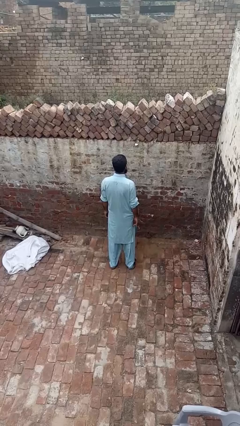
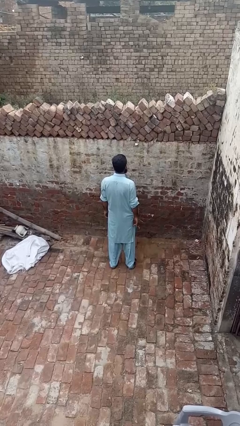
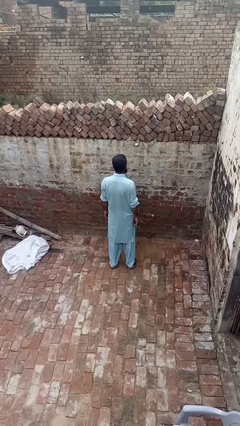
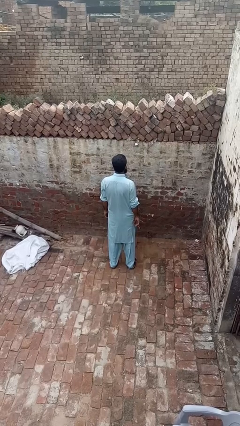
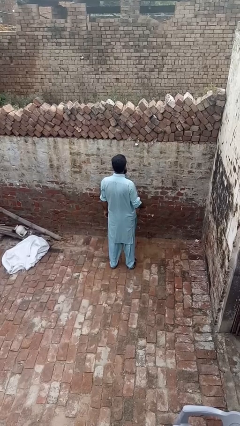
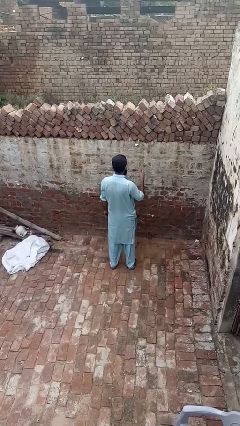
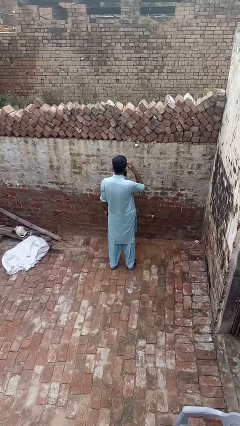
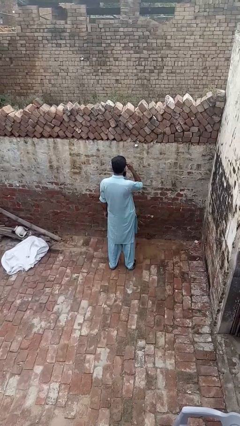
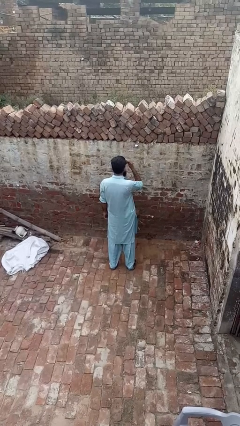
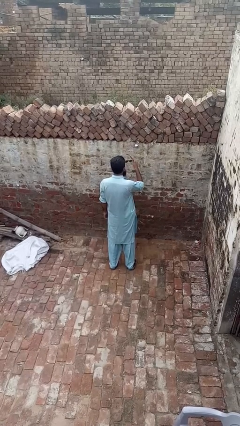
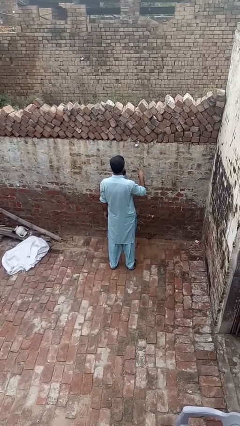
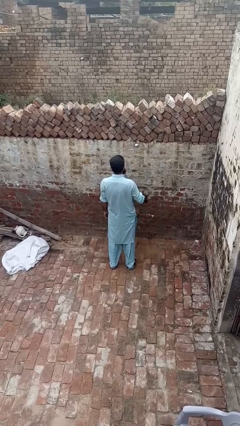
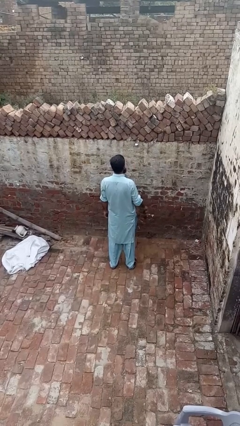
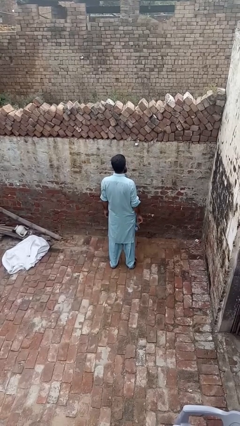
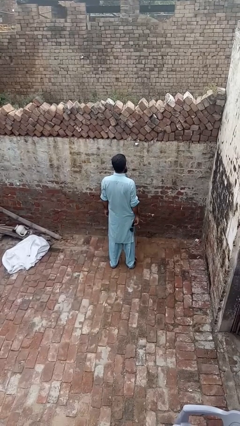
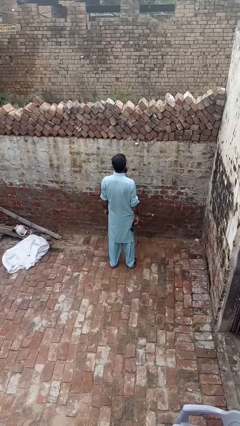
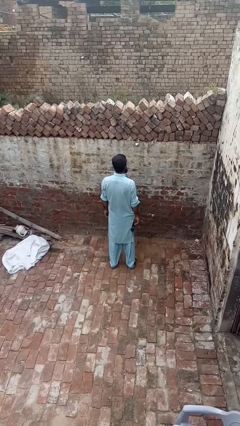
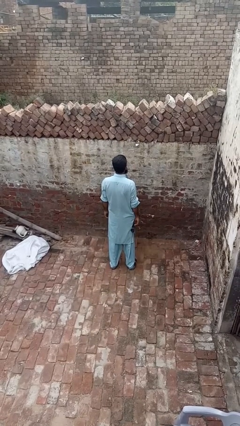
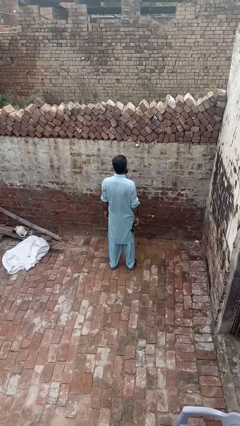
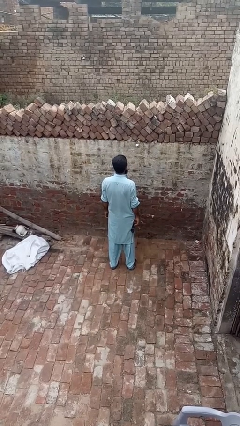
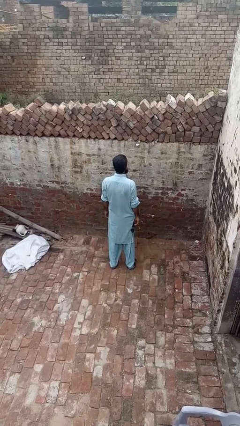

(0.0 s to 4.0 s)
person takes off sunglasses

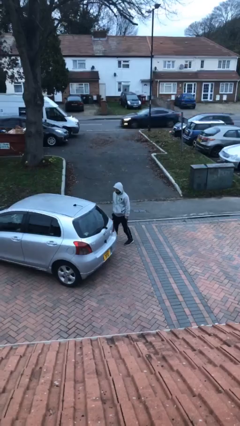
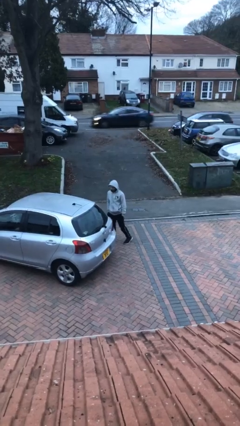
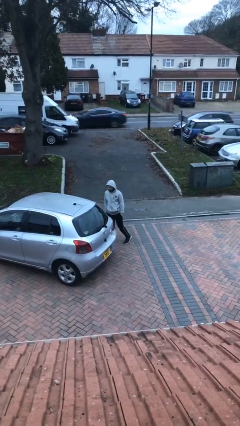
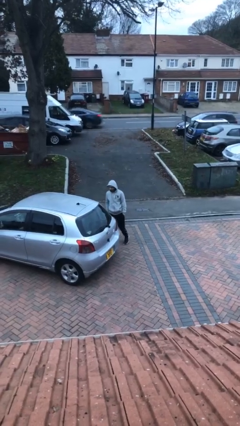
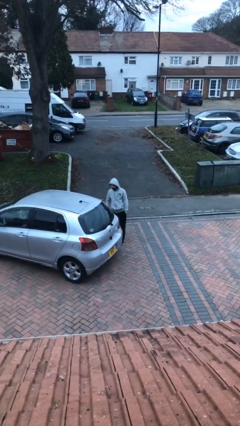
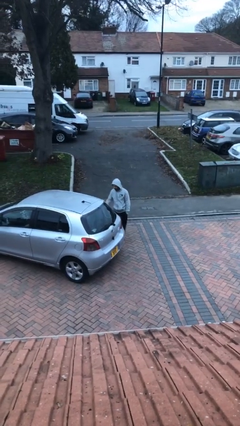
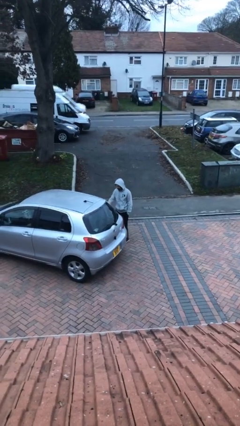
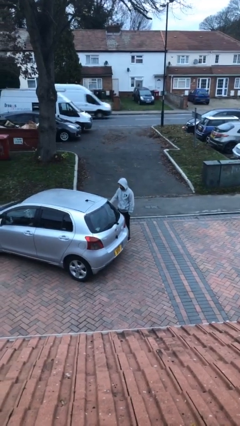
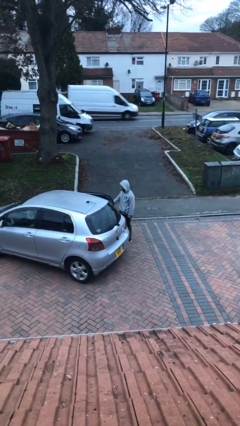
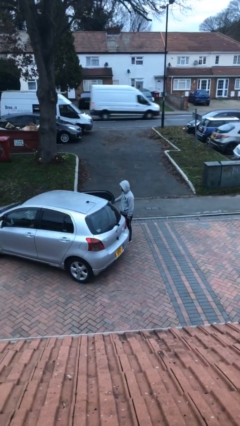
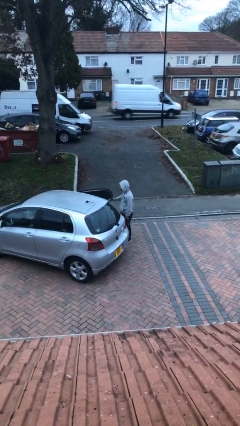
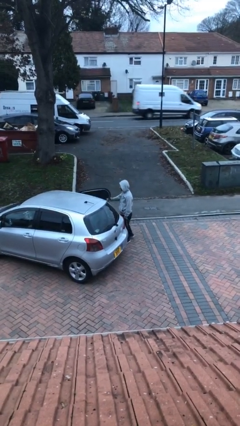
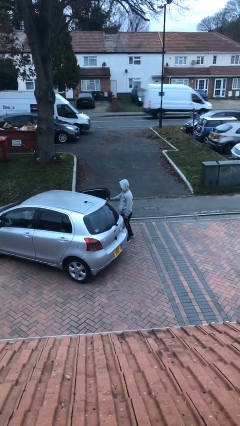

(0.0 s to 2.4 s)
person opens car door

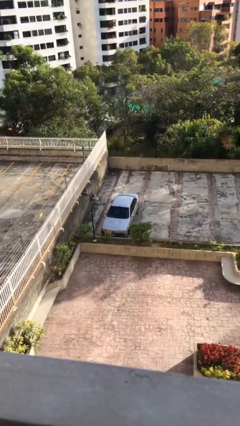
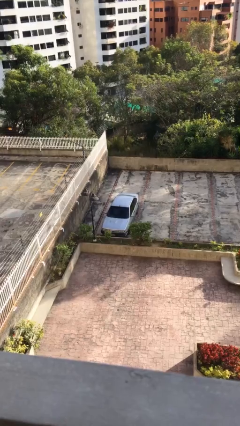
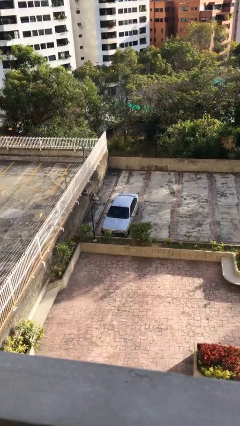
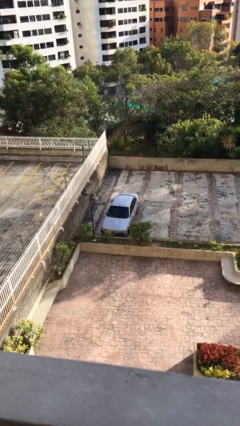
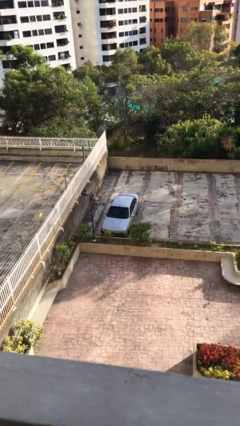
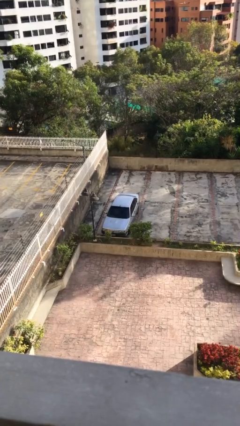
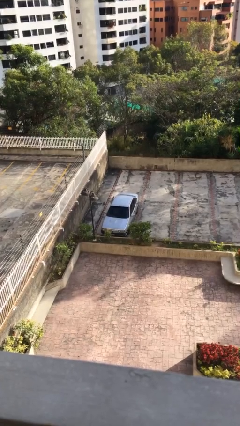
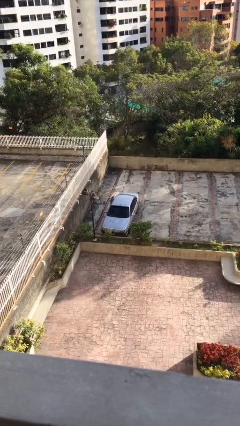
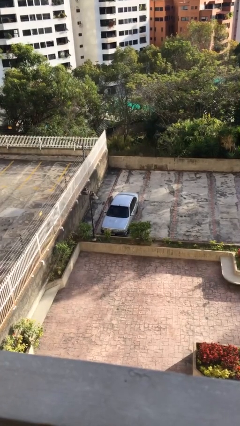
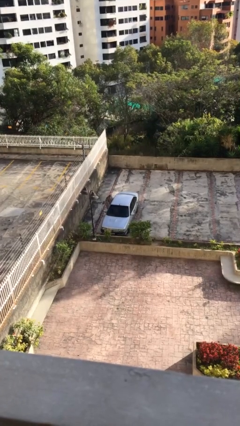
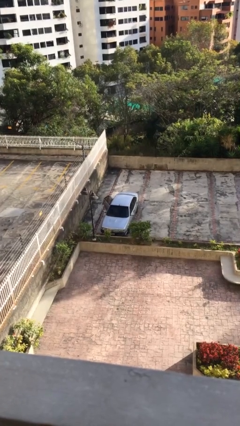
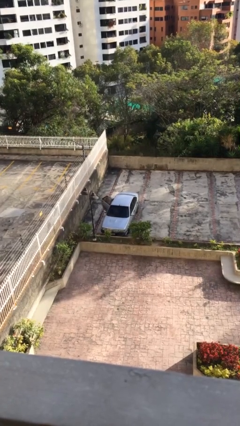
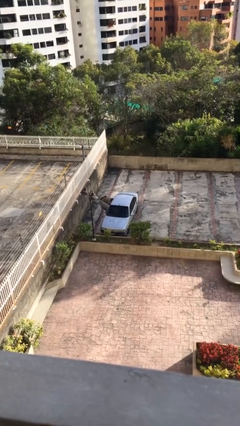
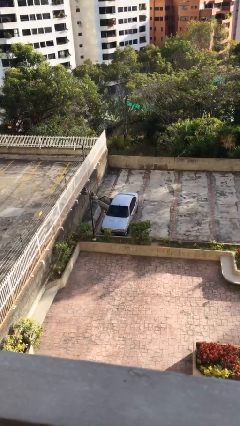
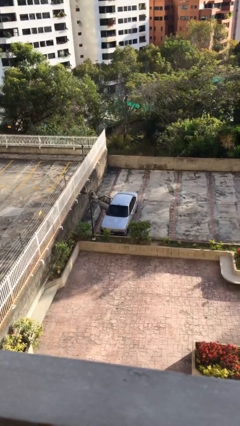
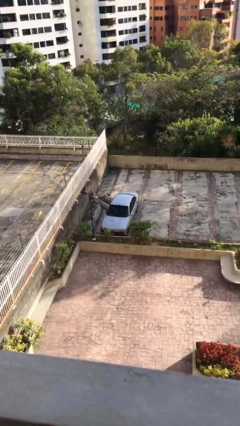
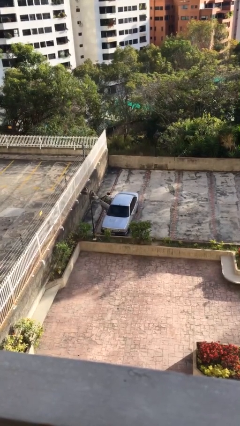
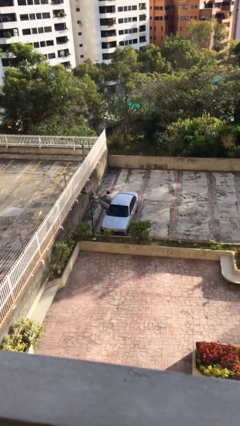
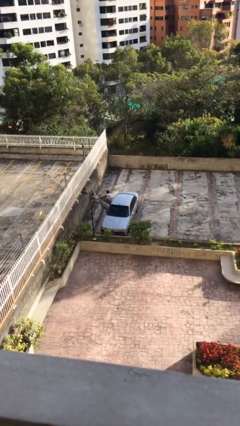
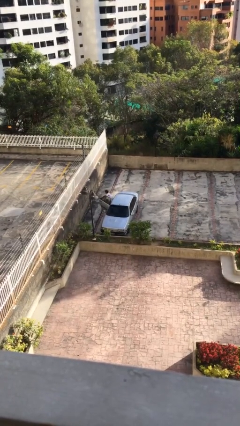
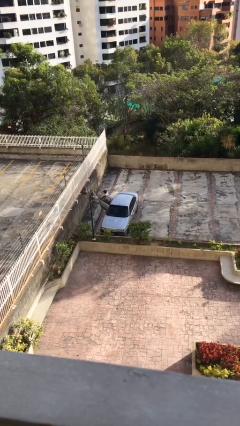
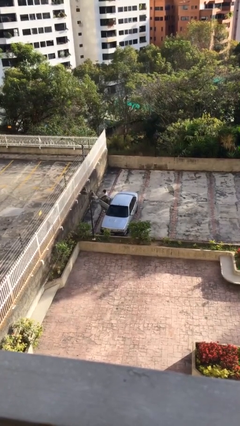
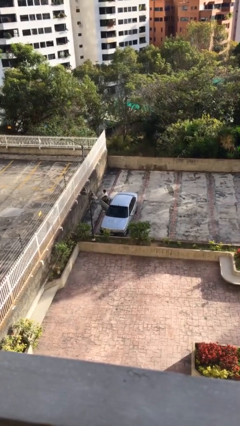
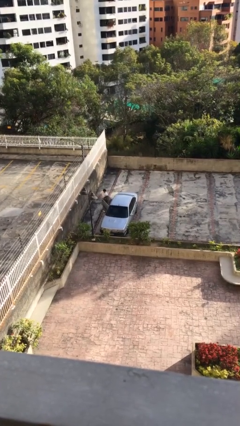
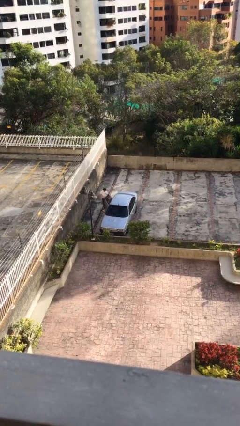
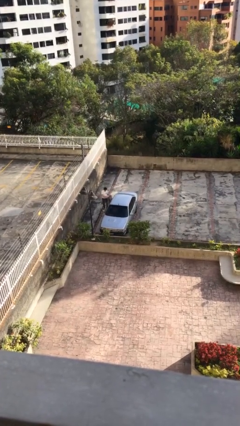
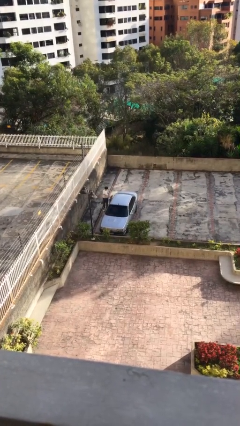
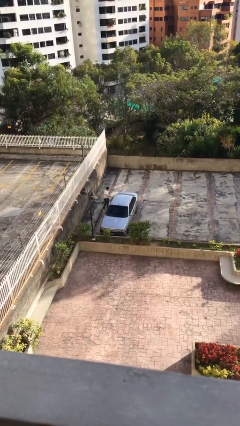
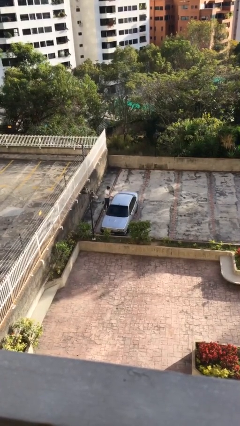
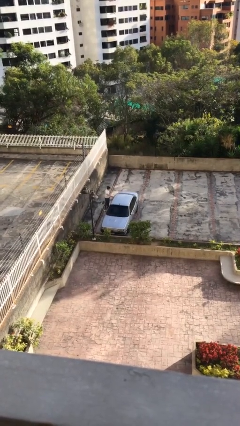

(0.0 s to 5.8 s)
car drops off person

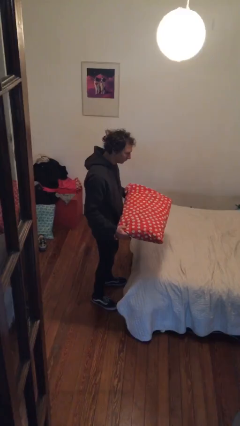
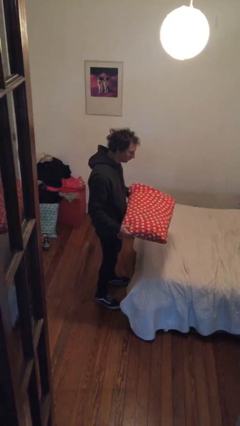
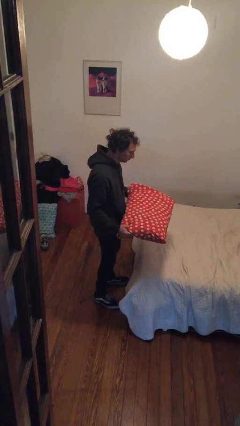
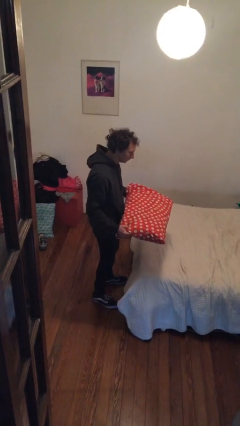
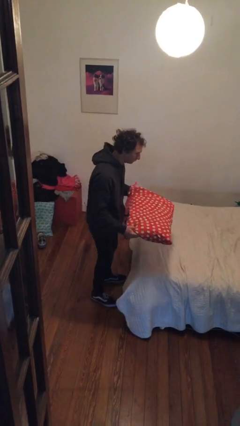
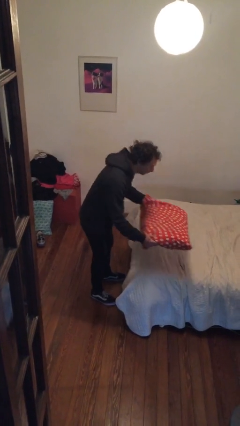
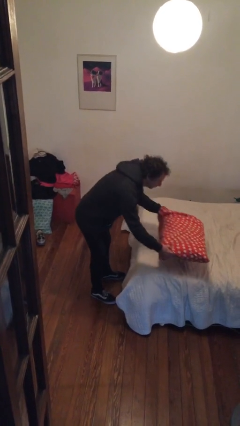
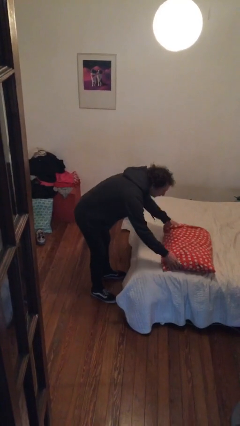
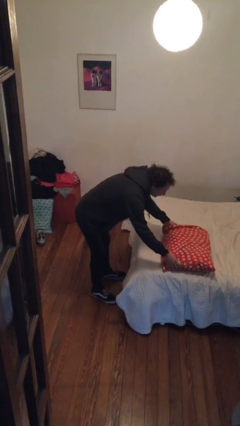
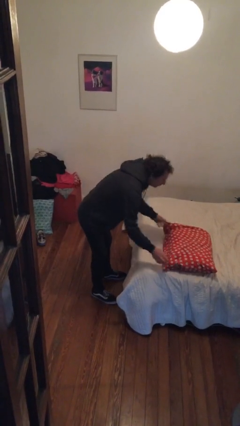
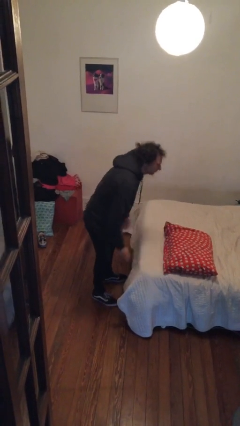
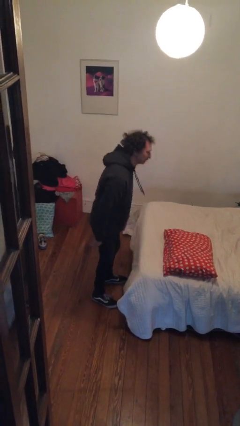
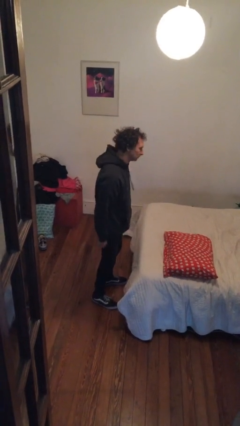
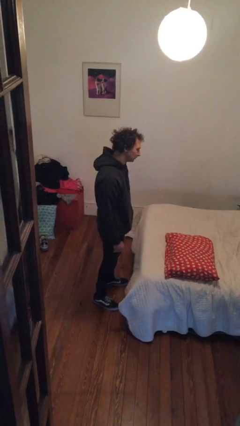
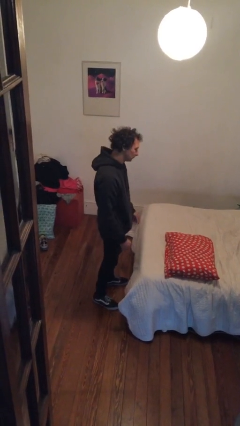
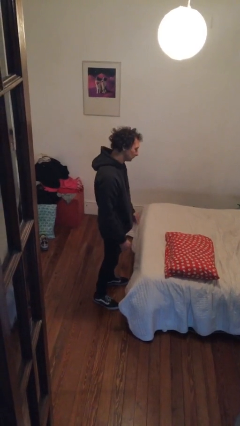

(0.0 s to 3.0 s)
person puts down object on bed

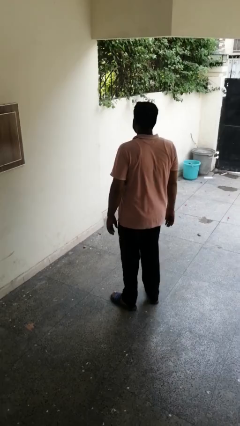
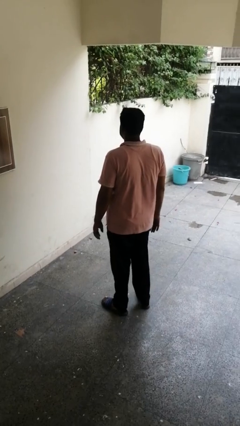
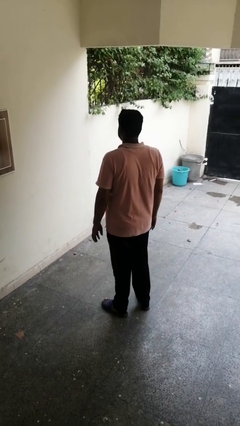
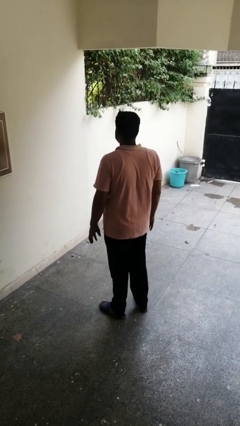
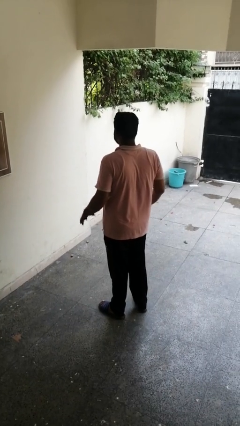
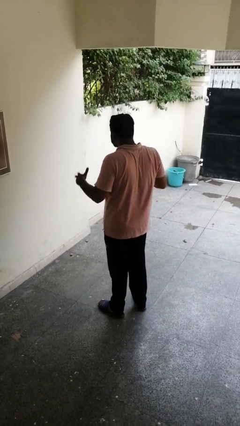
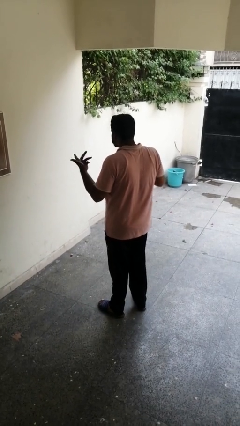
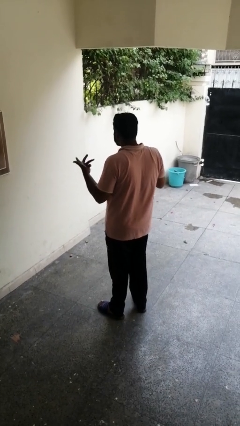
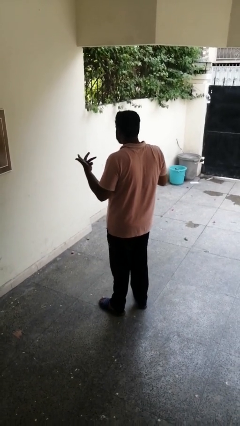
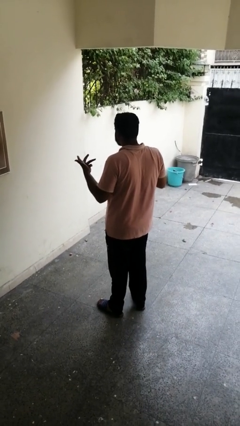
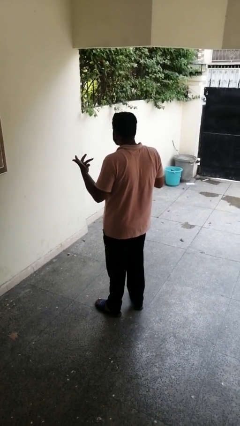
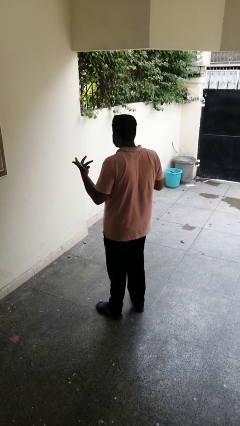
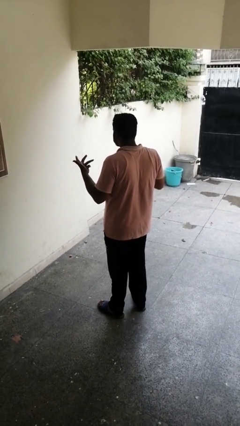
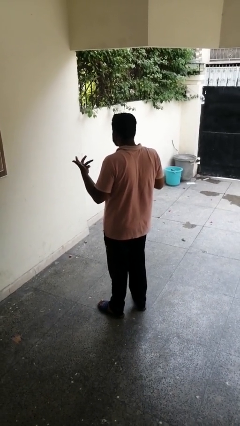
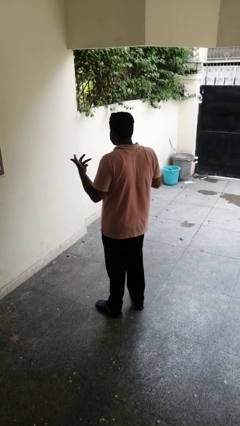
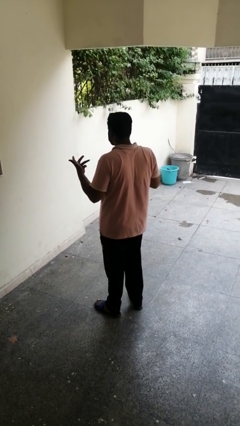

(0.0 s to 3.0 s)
person shrugs
